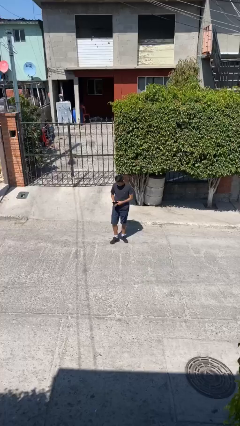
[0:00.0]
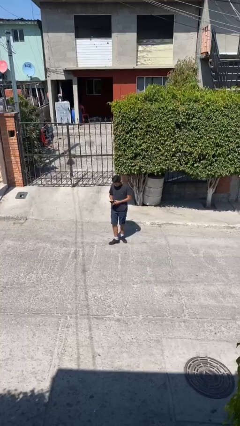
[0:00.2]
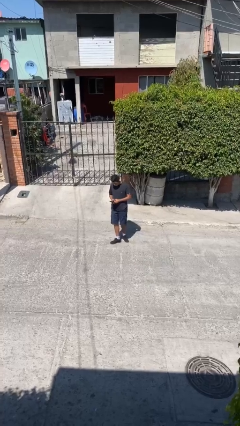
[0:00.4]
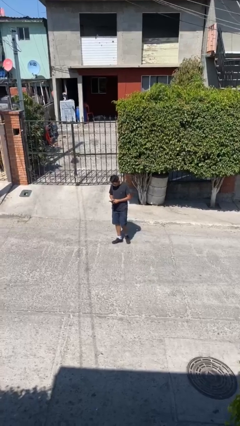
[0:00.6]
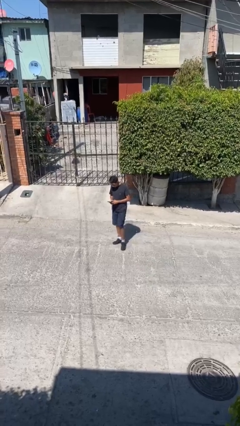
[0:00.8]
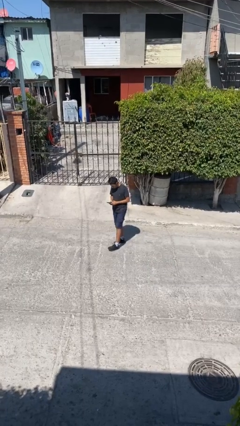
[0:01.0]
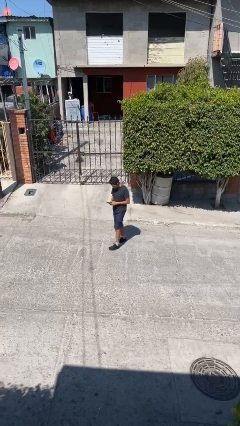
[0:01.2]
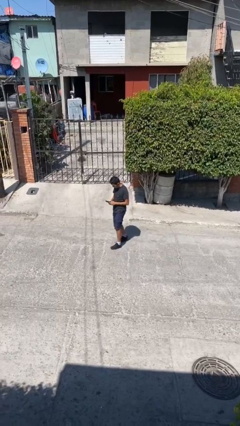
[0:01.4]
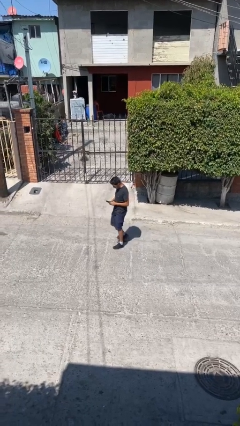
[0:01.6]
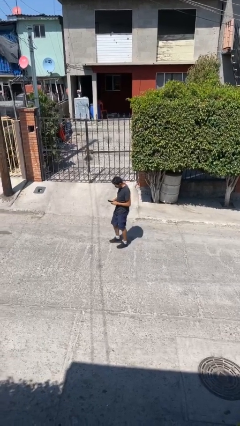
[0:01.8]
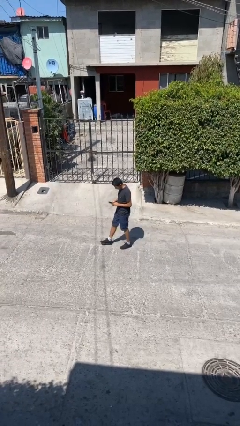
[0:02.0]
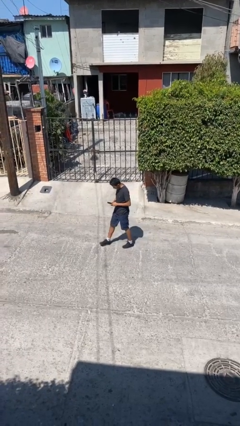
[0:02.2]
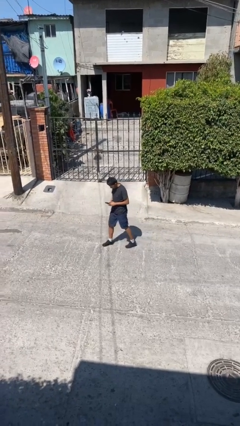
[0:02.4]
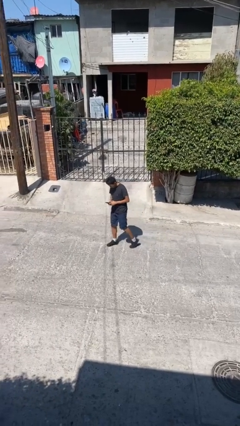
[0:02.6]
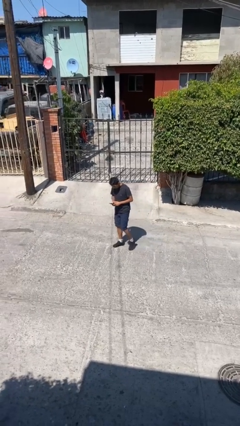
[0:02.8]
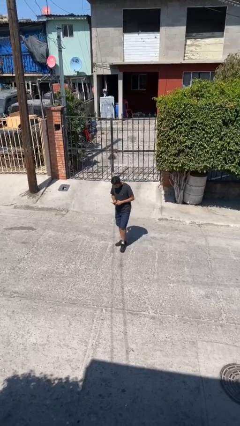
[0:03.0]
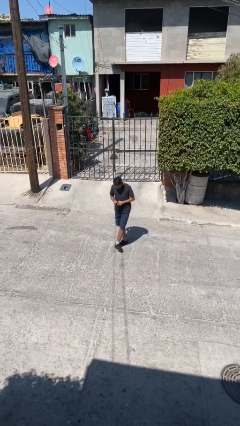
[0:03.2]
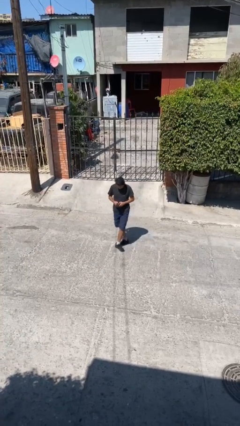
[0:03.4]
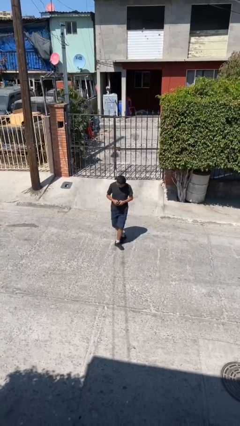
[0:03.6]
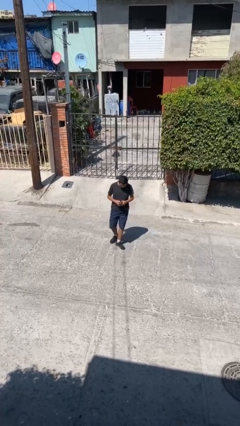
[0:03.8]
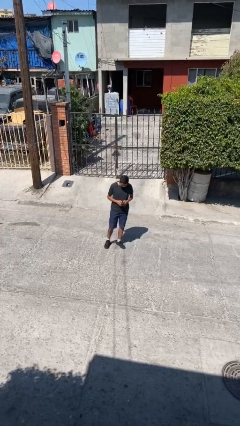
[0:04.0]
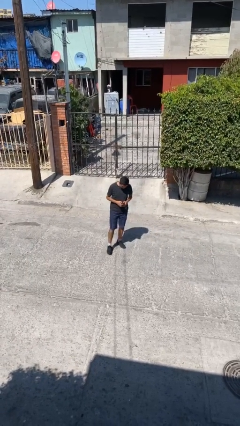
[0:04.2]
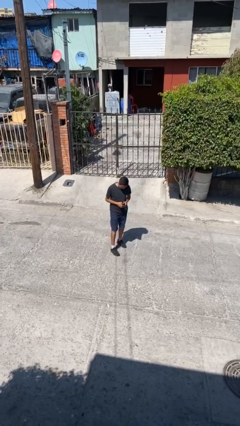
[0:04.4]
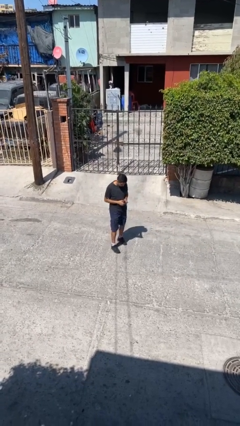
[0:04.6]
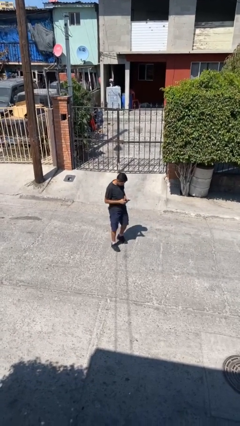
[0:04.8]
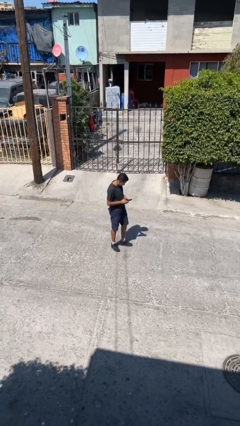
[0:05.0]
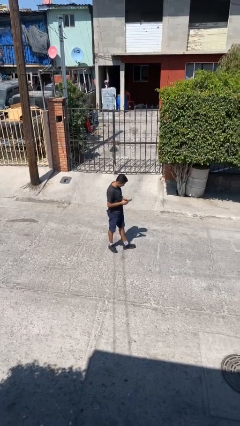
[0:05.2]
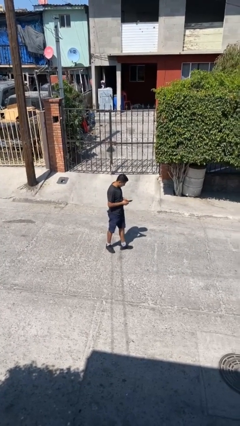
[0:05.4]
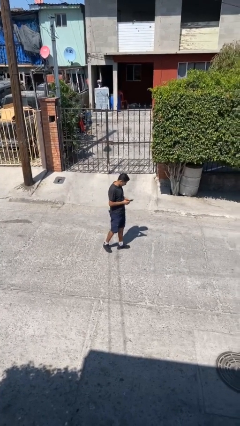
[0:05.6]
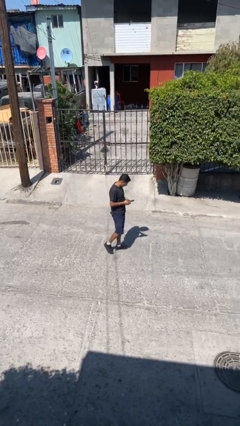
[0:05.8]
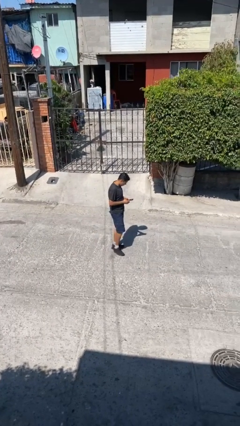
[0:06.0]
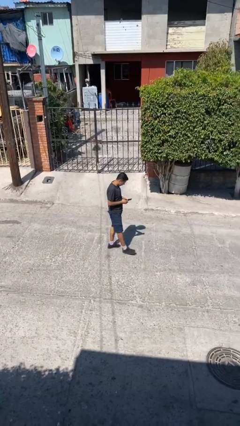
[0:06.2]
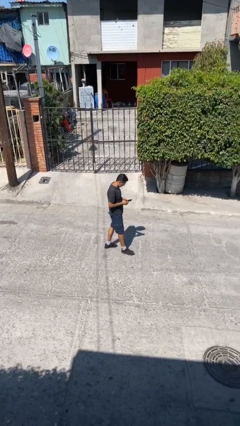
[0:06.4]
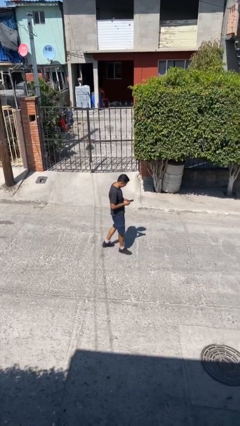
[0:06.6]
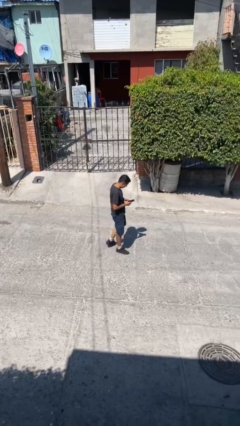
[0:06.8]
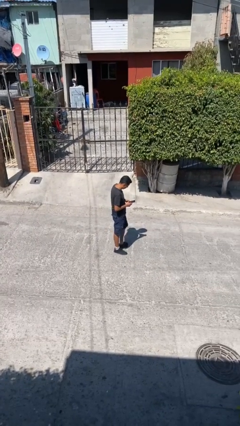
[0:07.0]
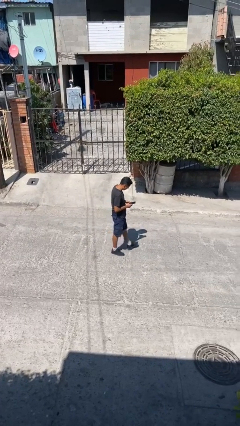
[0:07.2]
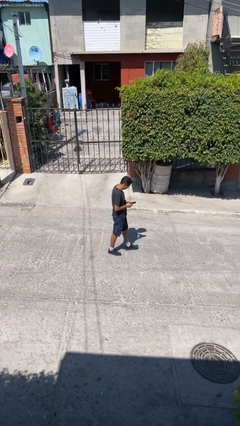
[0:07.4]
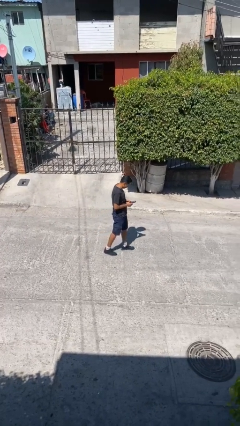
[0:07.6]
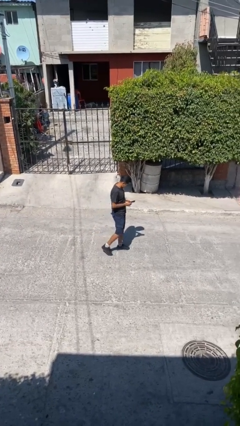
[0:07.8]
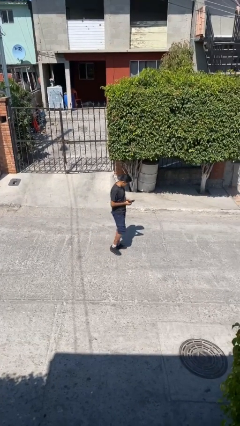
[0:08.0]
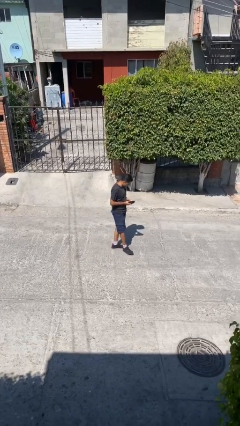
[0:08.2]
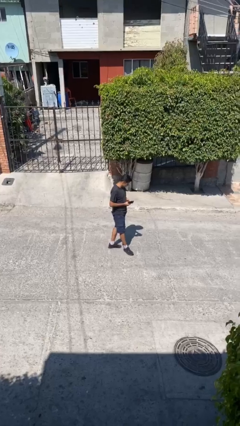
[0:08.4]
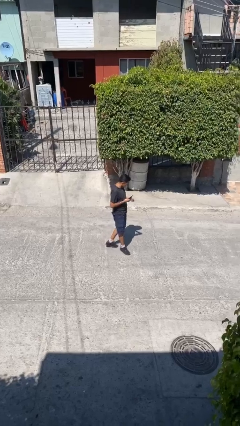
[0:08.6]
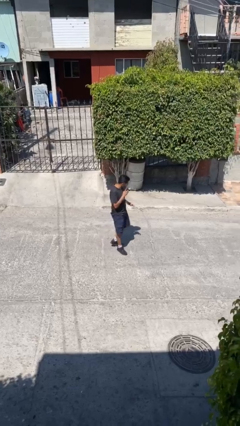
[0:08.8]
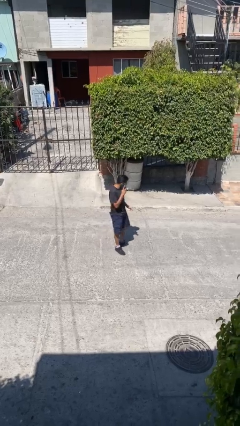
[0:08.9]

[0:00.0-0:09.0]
person texts on phone

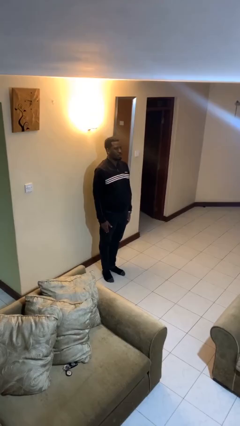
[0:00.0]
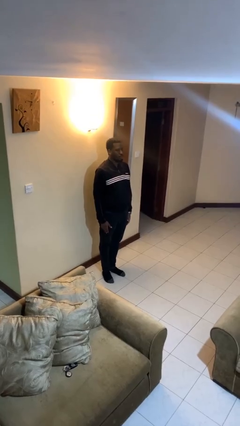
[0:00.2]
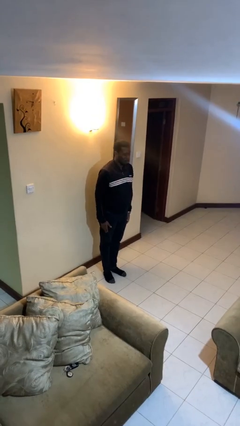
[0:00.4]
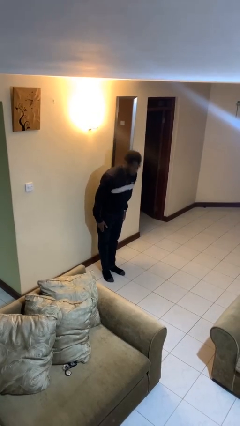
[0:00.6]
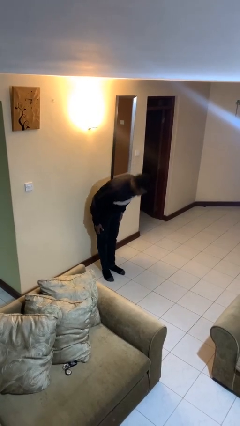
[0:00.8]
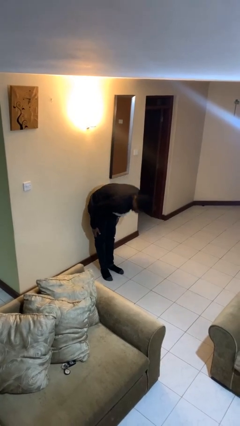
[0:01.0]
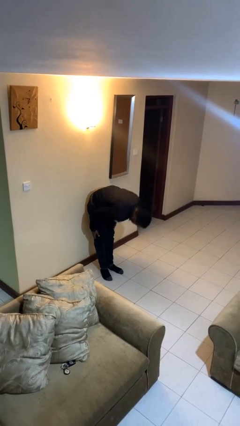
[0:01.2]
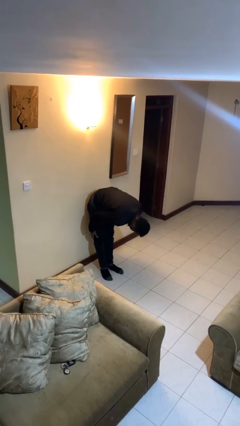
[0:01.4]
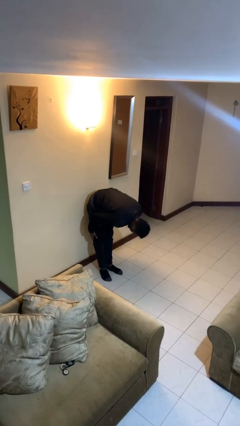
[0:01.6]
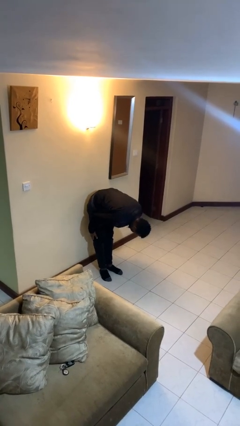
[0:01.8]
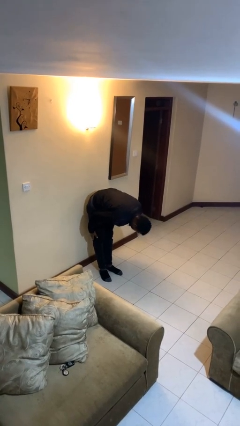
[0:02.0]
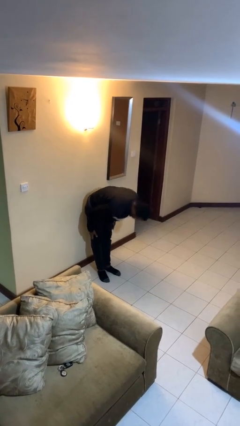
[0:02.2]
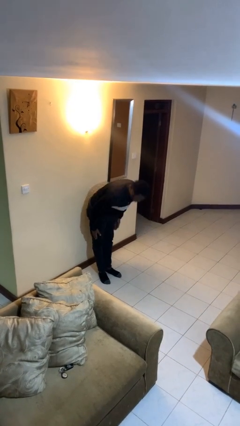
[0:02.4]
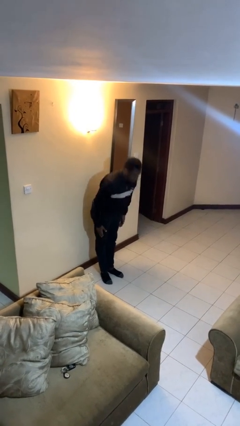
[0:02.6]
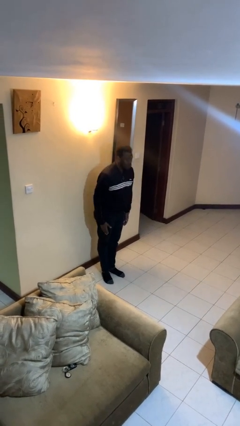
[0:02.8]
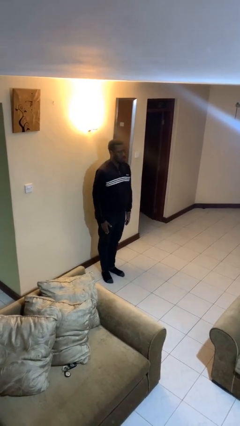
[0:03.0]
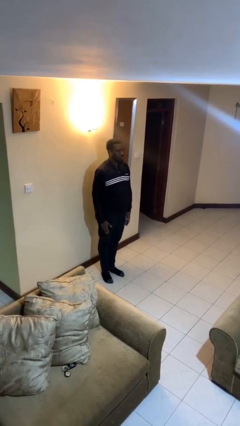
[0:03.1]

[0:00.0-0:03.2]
person bows

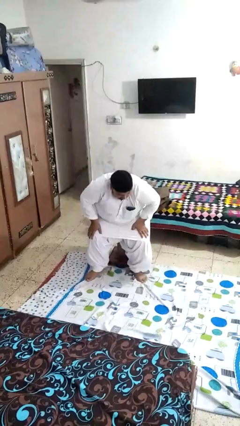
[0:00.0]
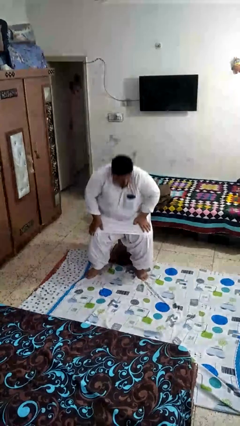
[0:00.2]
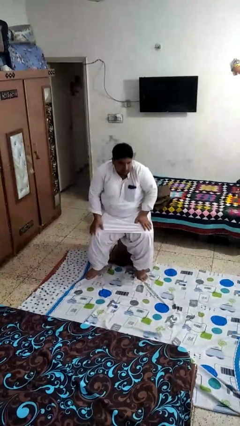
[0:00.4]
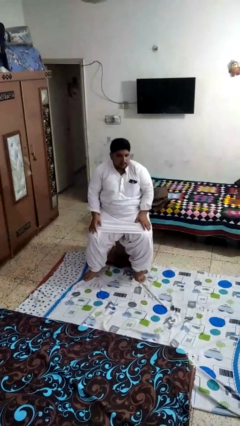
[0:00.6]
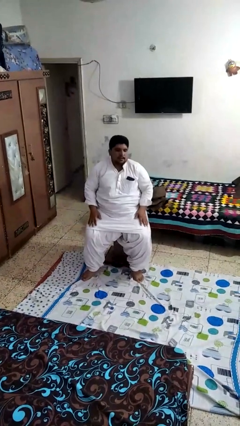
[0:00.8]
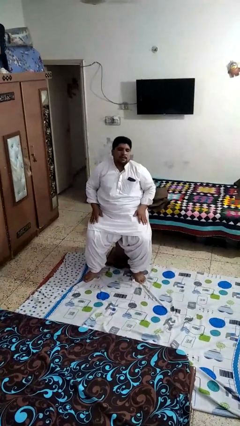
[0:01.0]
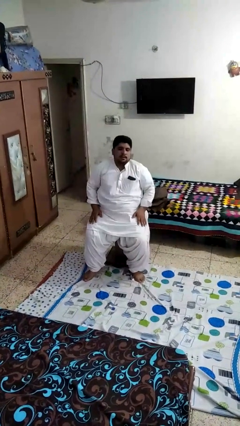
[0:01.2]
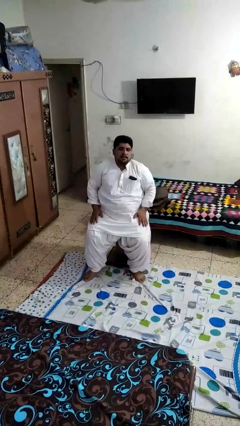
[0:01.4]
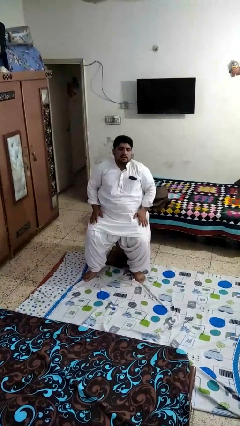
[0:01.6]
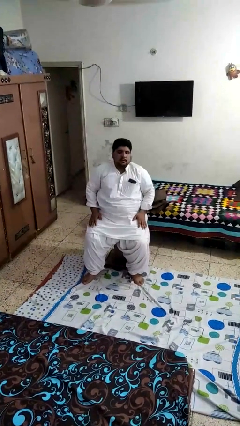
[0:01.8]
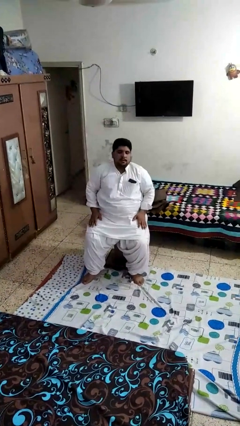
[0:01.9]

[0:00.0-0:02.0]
person sits down

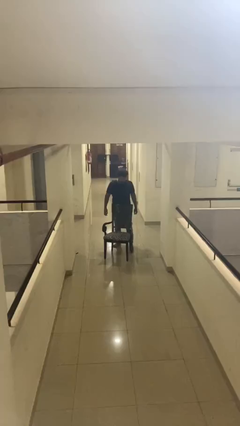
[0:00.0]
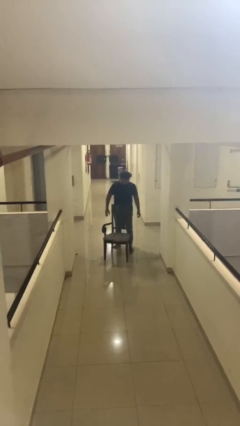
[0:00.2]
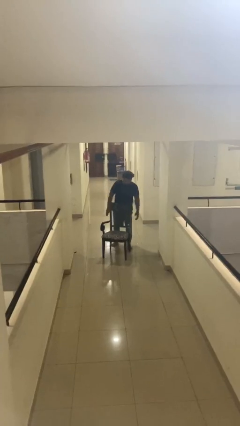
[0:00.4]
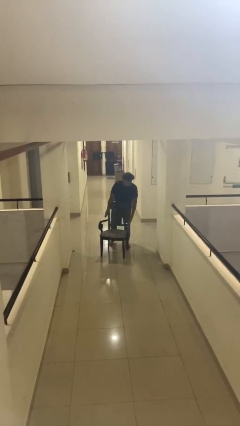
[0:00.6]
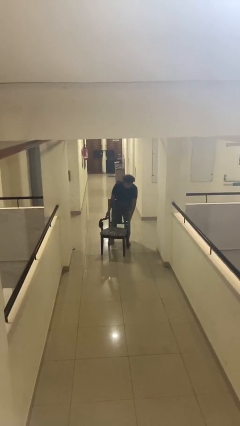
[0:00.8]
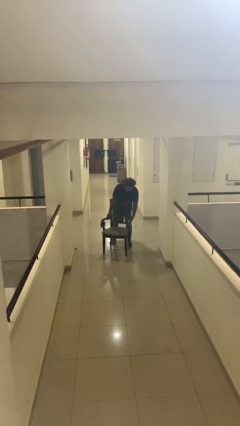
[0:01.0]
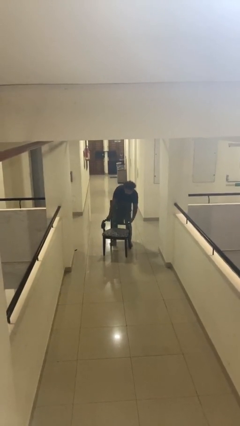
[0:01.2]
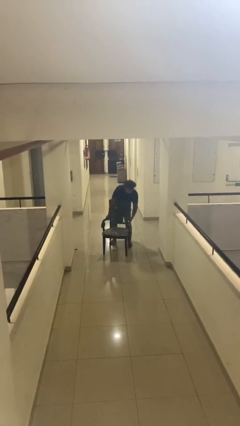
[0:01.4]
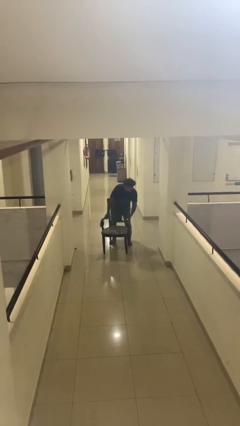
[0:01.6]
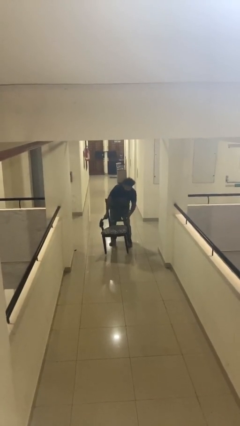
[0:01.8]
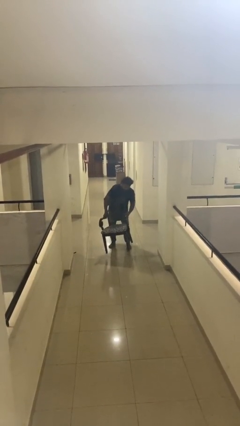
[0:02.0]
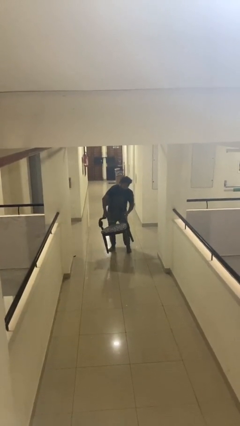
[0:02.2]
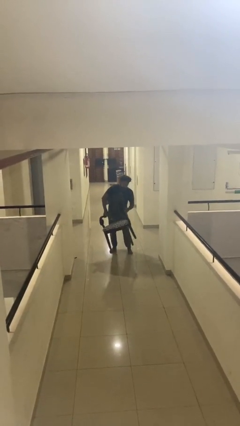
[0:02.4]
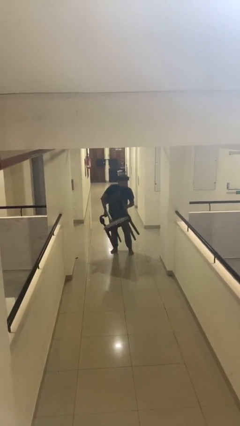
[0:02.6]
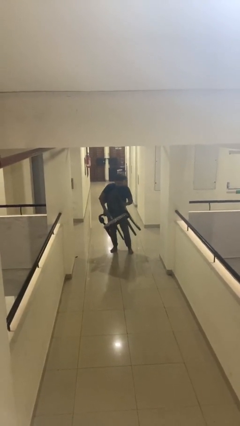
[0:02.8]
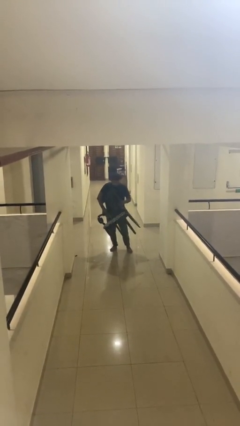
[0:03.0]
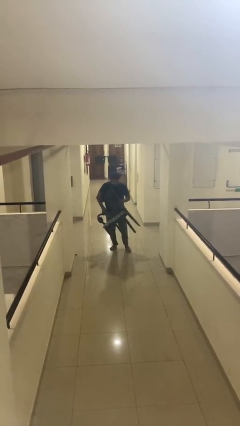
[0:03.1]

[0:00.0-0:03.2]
person picks up object from floor

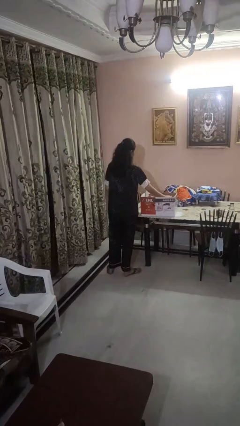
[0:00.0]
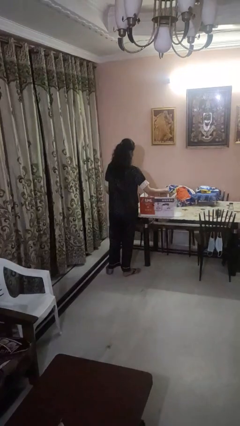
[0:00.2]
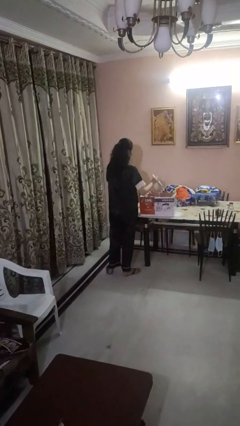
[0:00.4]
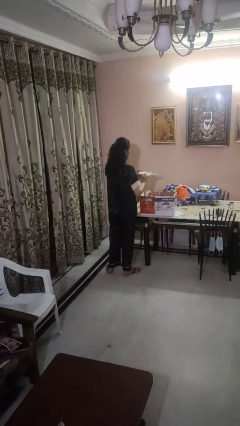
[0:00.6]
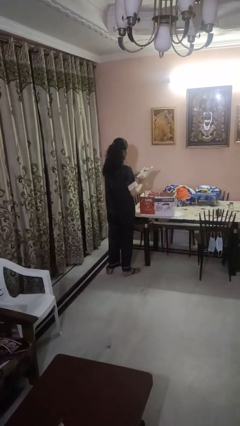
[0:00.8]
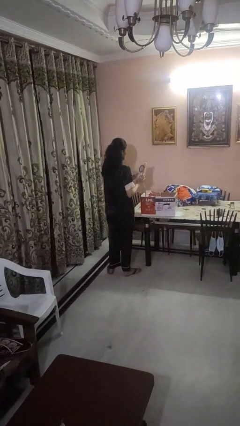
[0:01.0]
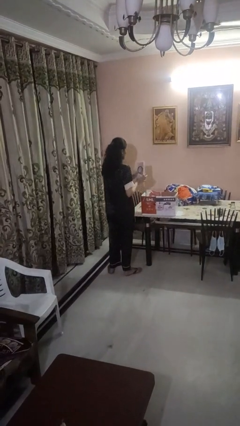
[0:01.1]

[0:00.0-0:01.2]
person takes object from box
